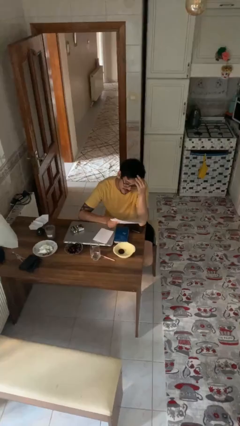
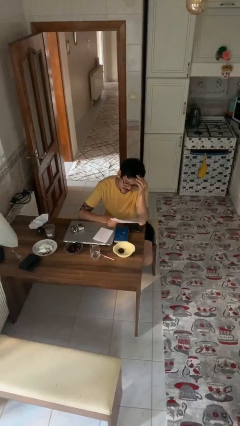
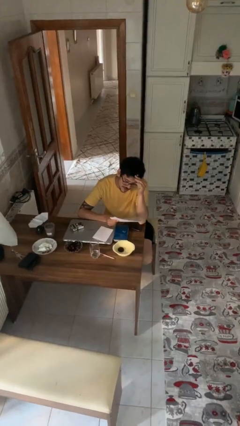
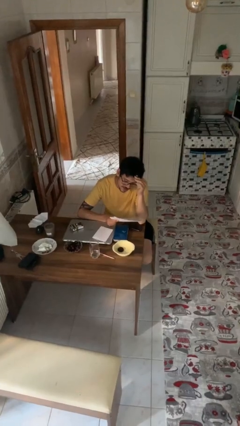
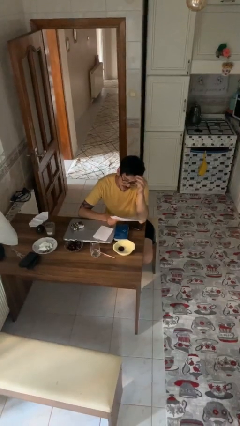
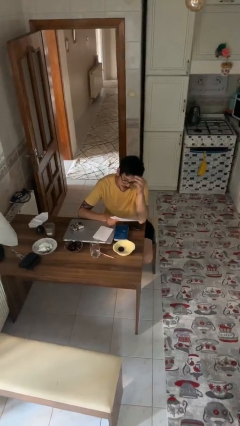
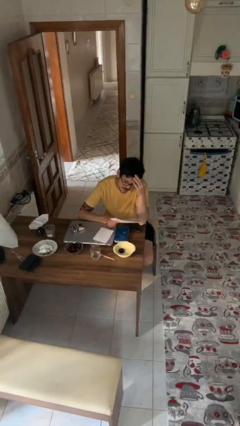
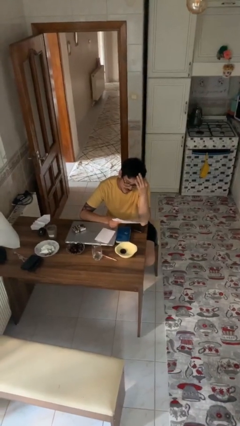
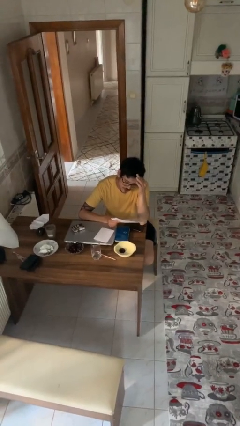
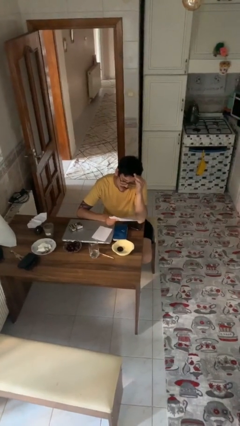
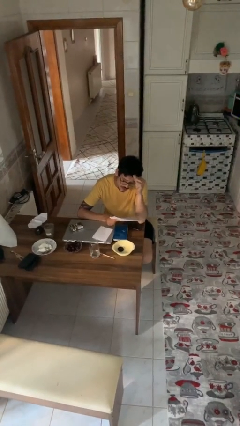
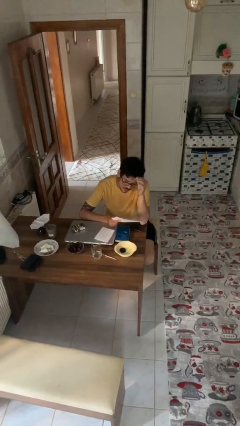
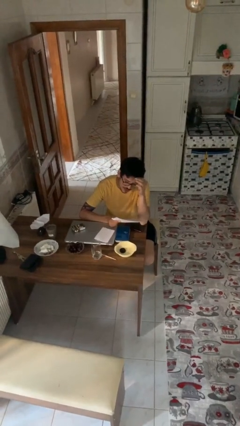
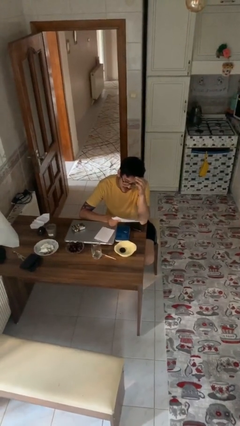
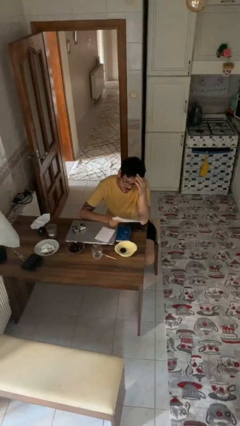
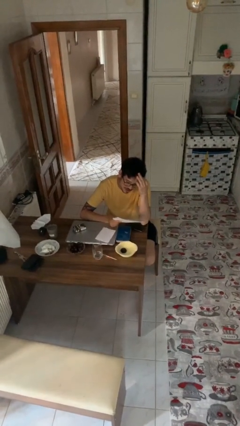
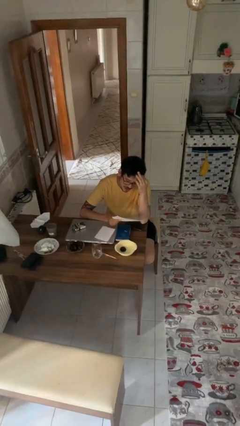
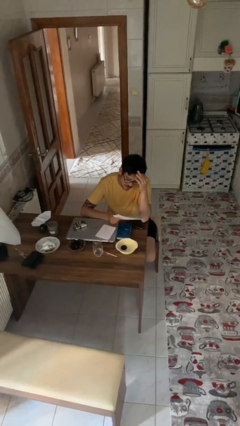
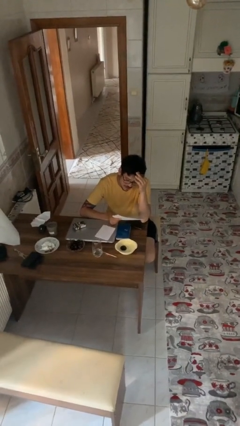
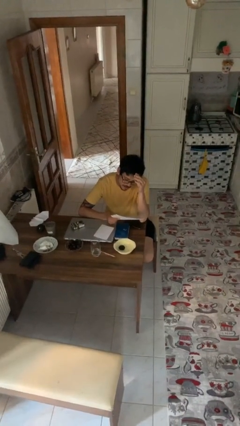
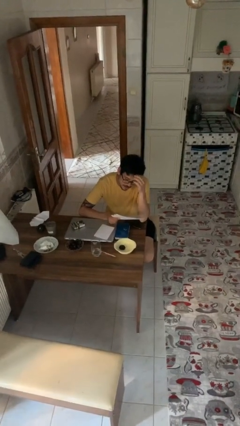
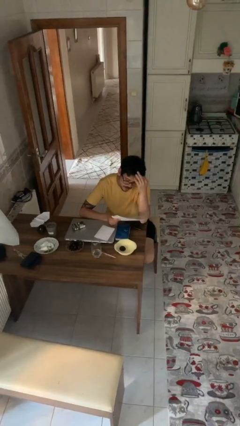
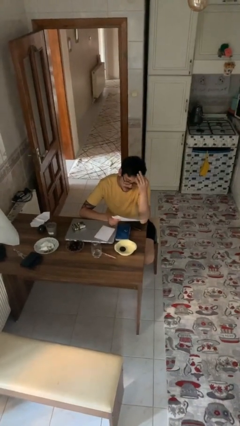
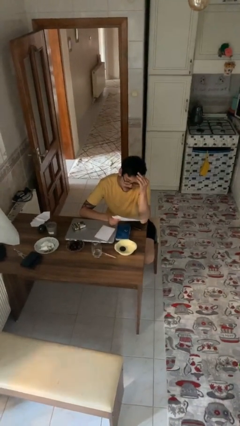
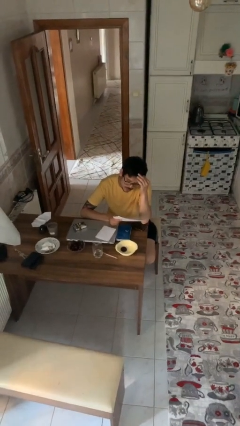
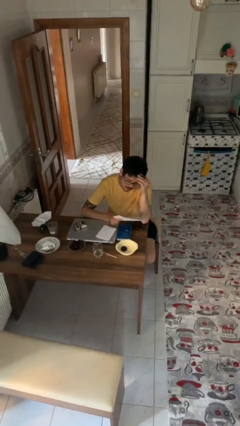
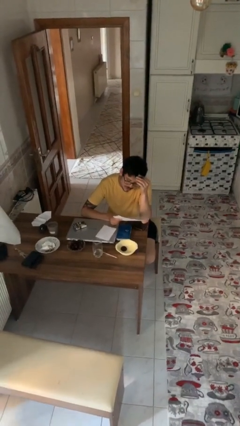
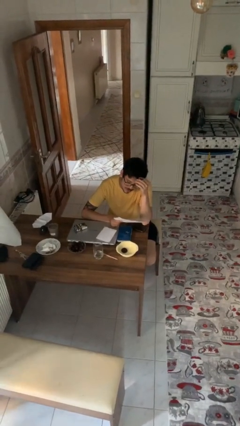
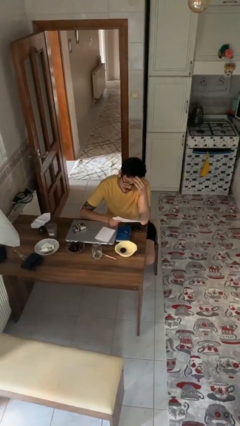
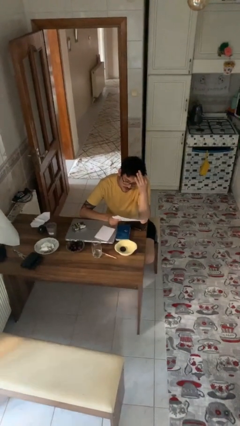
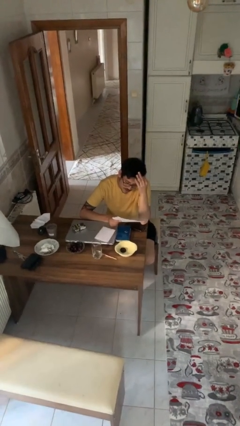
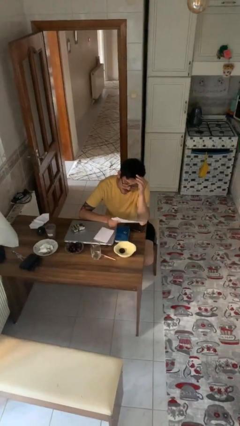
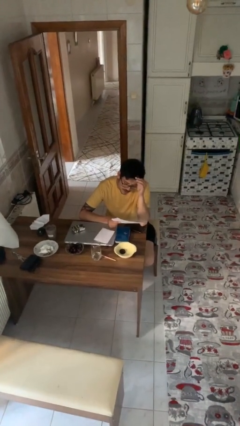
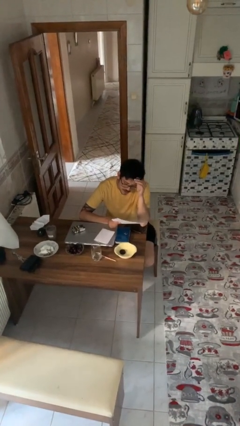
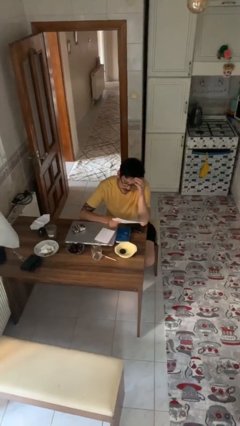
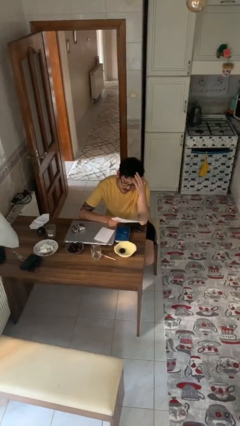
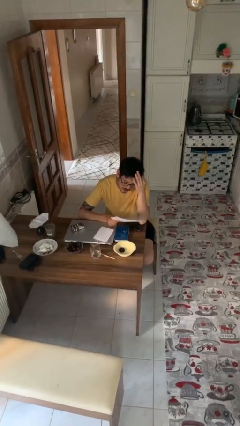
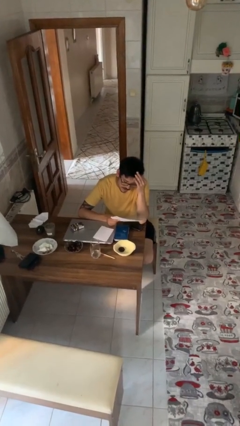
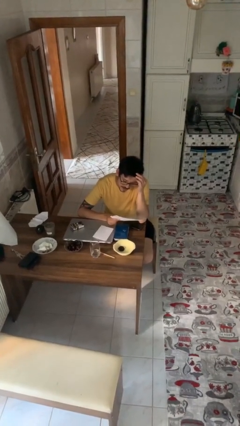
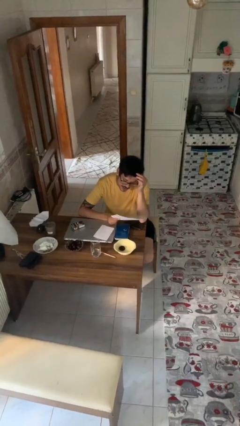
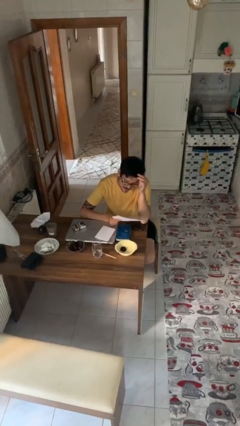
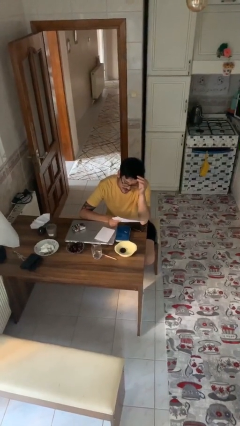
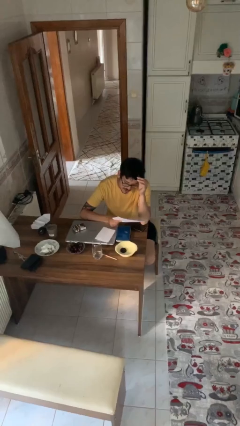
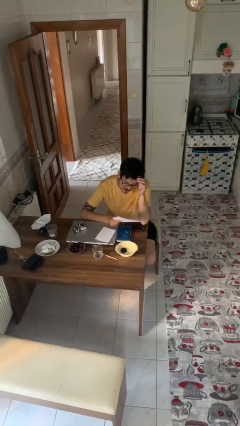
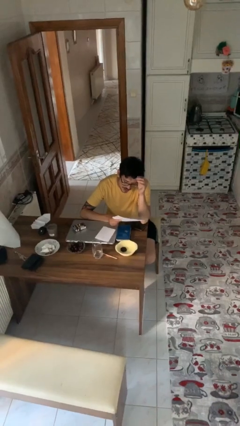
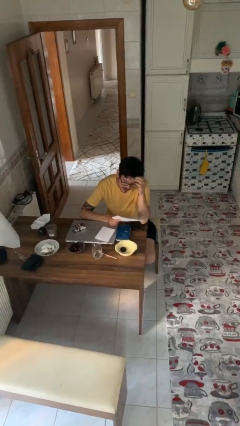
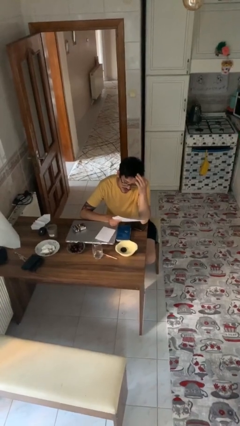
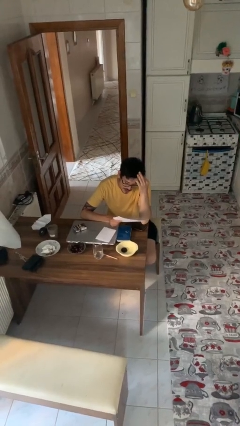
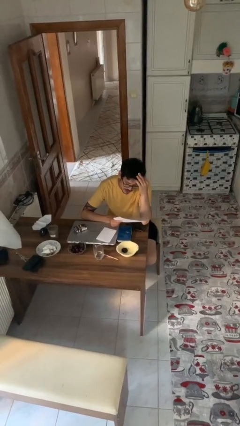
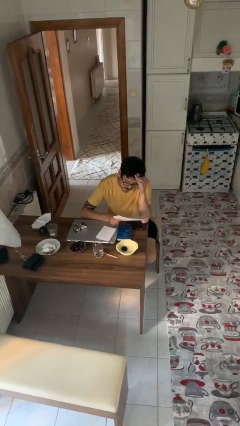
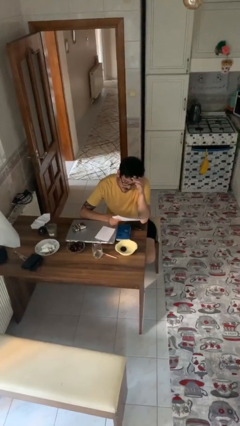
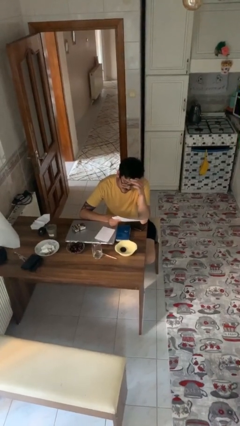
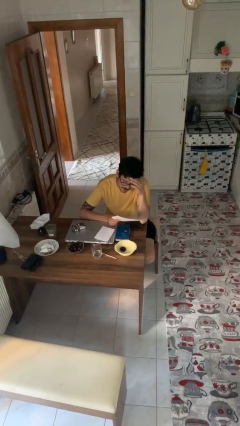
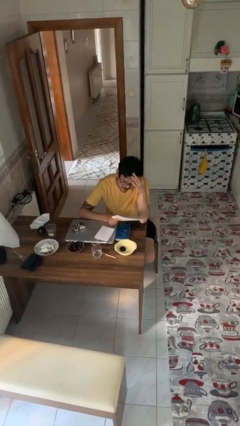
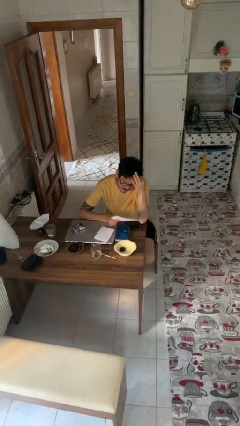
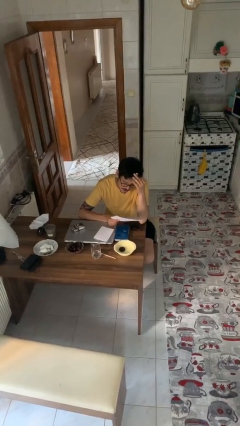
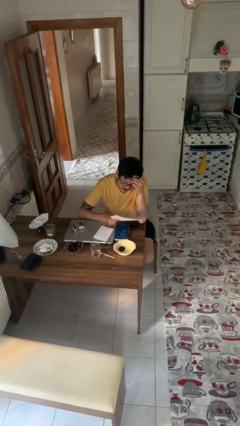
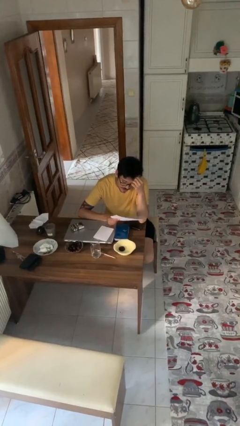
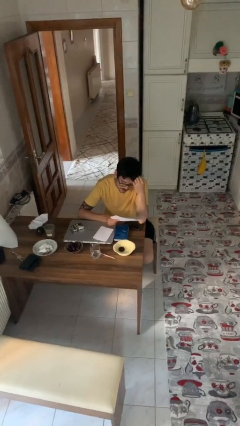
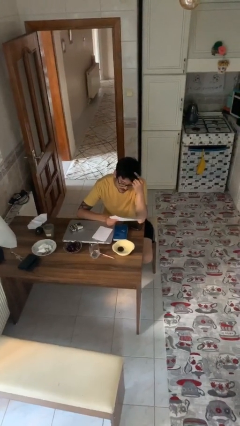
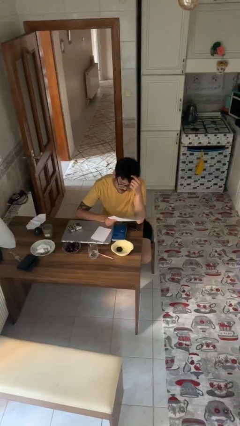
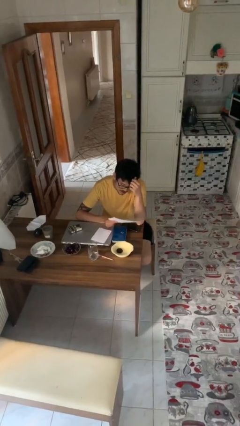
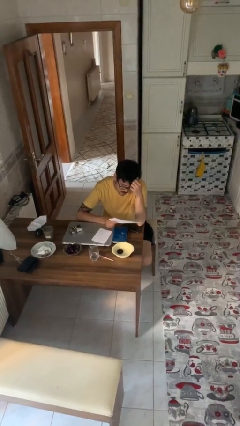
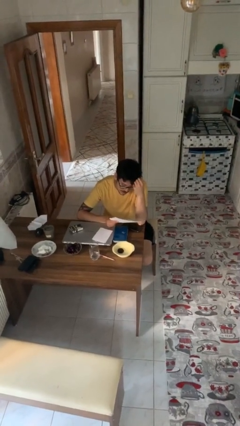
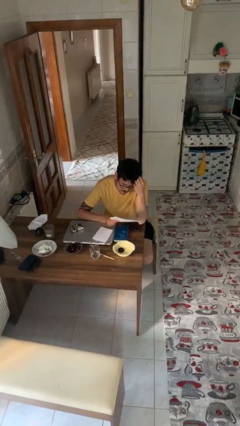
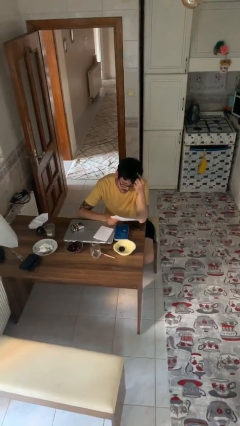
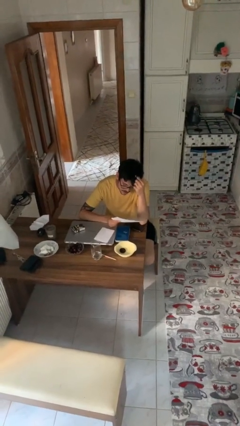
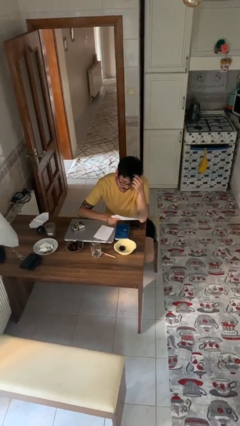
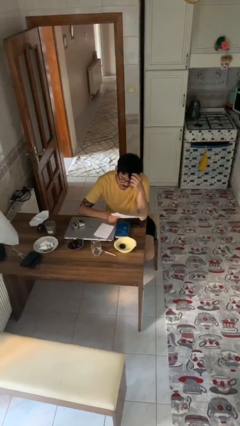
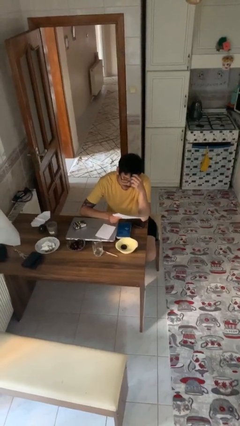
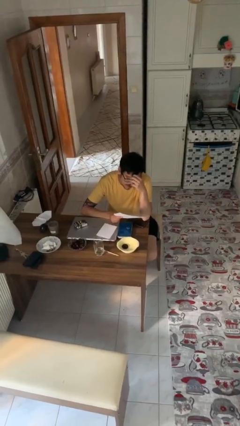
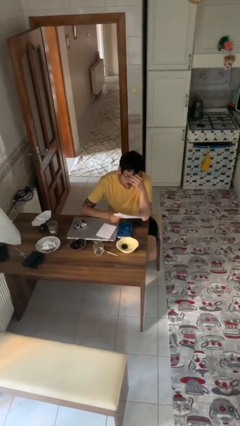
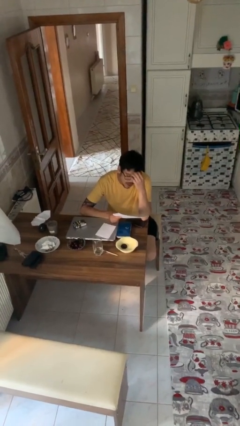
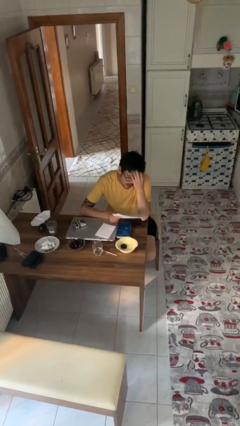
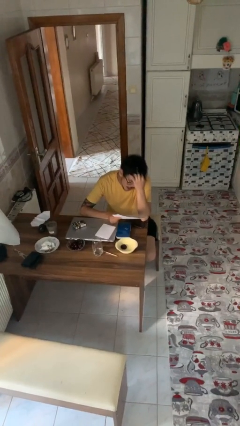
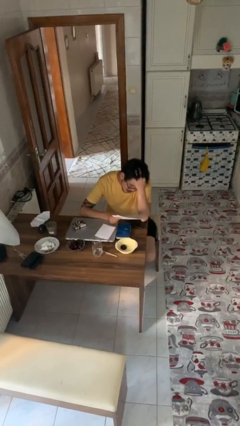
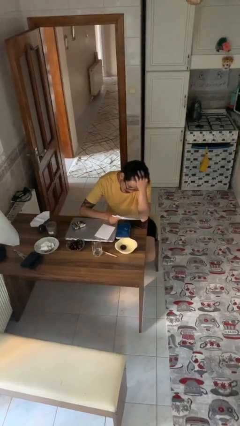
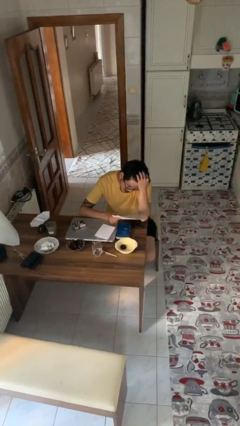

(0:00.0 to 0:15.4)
person reads document

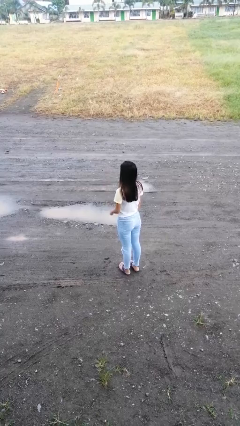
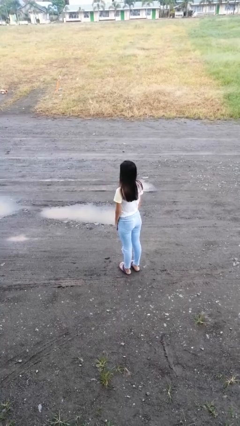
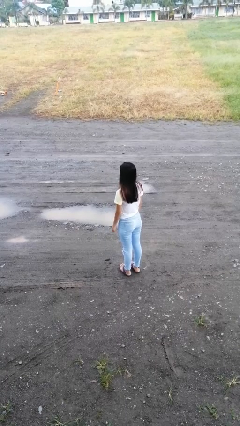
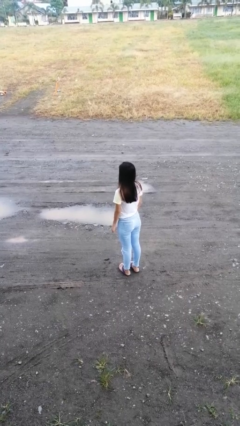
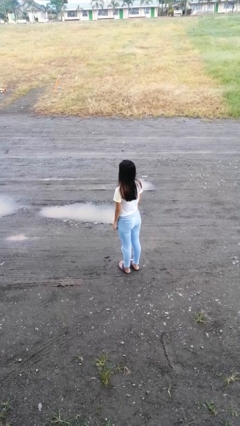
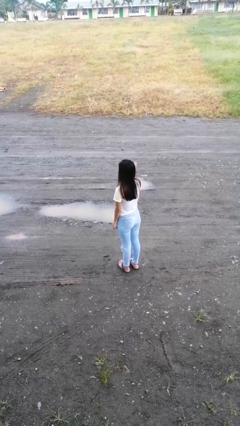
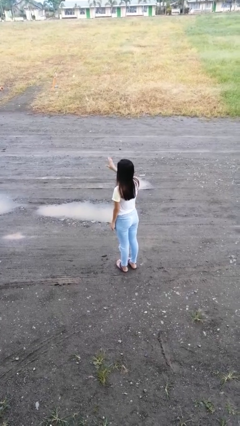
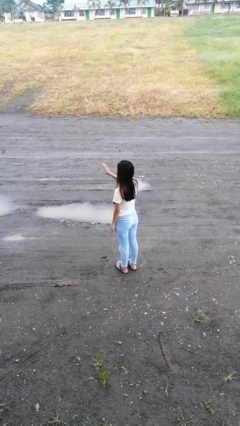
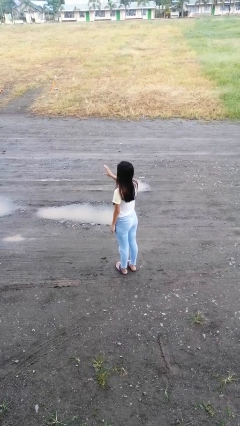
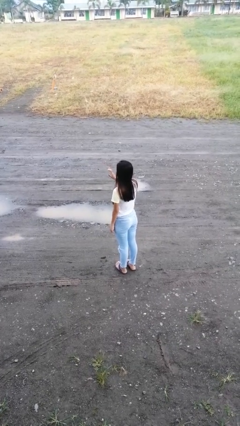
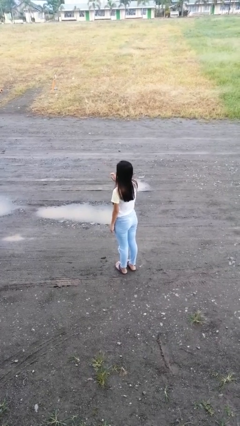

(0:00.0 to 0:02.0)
person gestures swipe left

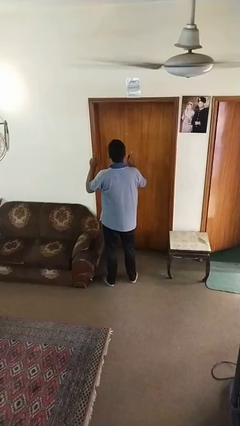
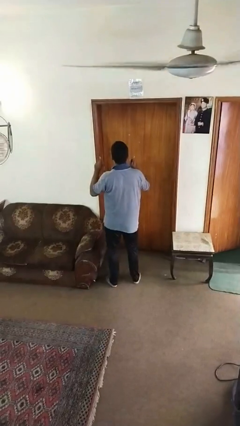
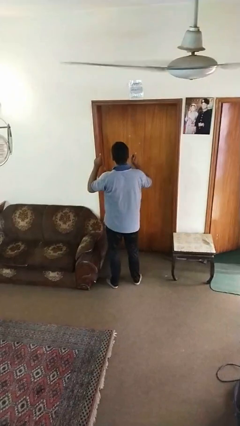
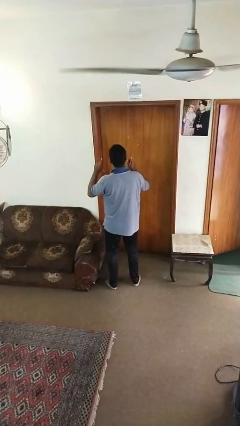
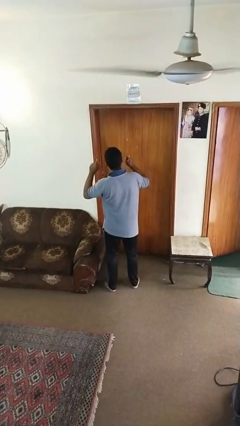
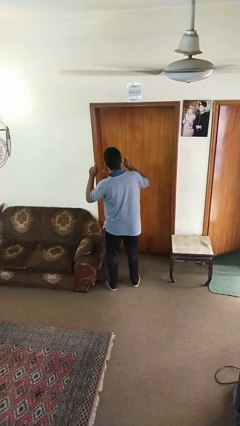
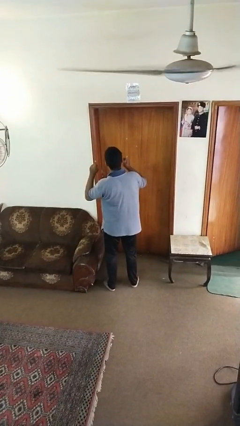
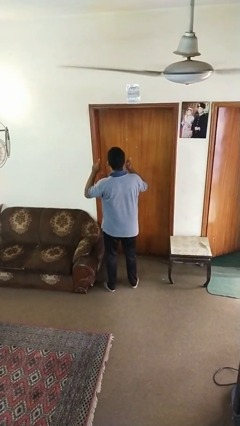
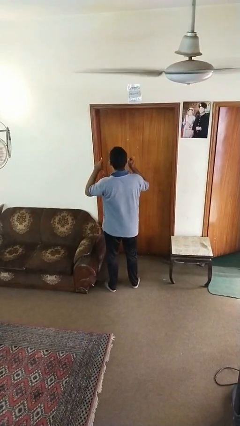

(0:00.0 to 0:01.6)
person dances in place
